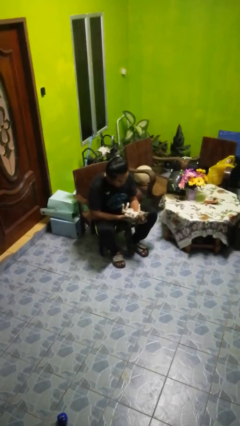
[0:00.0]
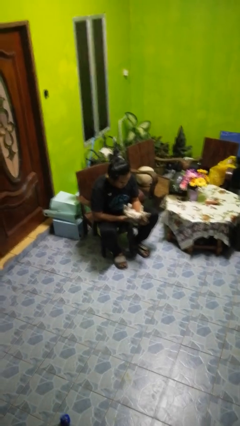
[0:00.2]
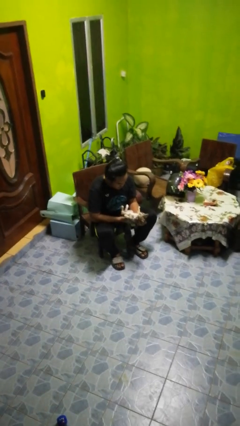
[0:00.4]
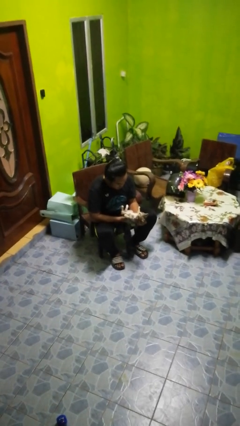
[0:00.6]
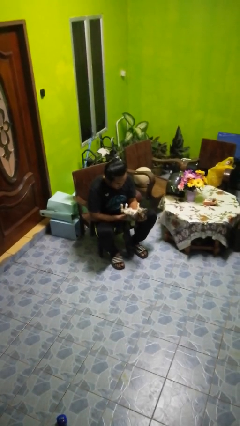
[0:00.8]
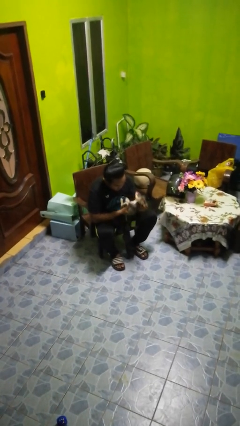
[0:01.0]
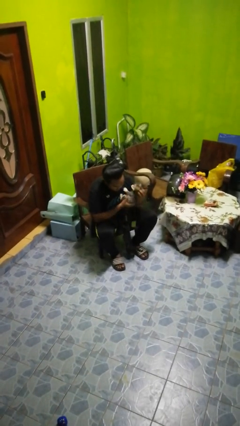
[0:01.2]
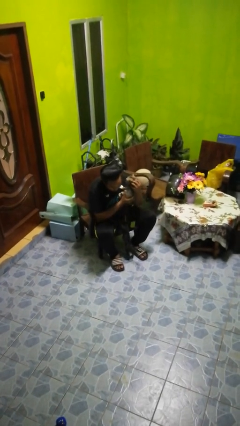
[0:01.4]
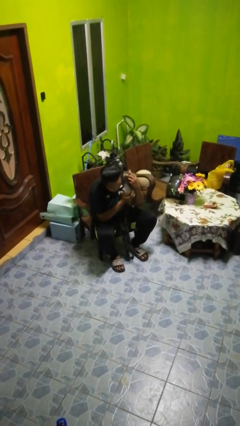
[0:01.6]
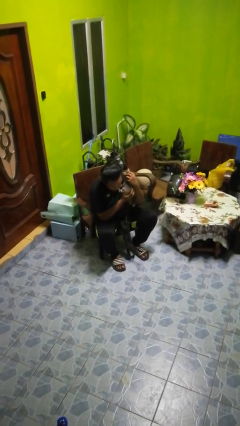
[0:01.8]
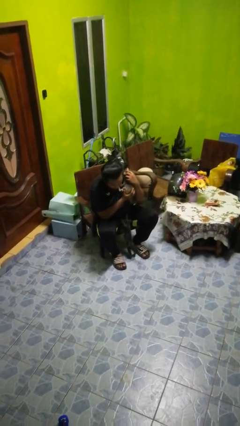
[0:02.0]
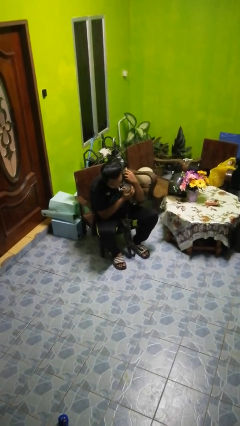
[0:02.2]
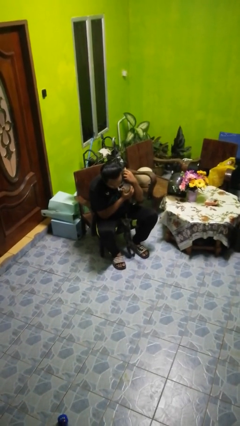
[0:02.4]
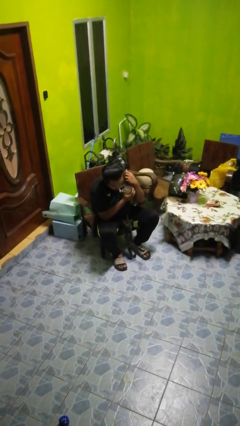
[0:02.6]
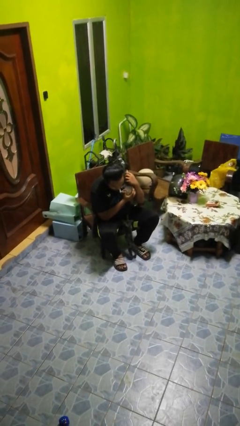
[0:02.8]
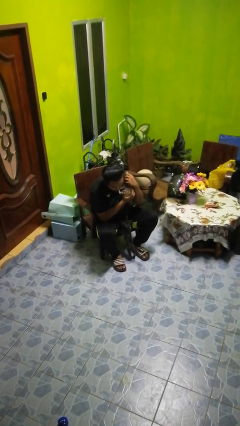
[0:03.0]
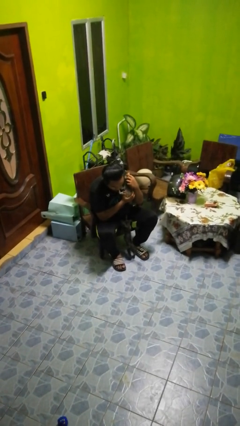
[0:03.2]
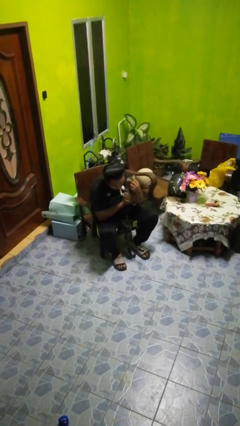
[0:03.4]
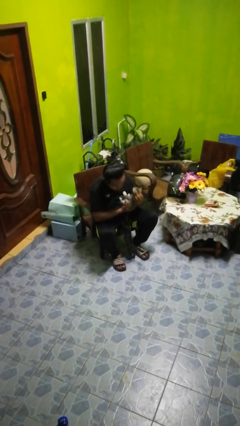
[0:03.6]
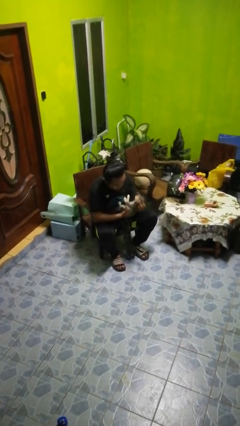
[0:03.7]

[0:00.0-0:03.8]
person hugs cat

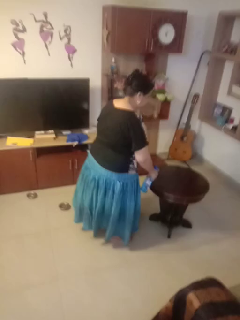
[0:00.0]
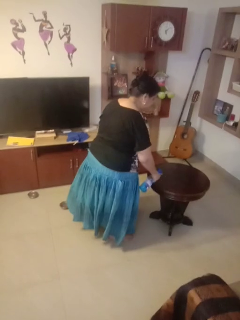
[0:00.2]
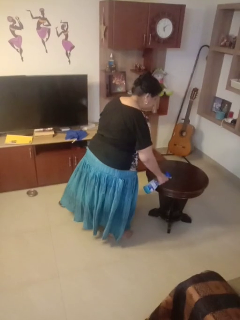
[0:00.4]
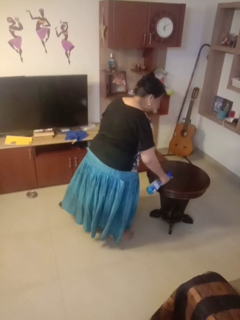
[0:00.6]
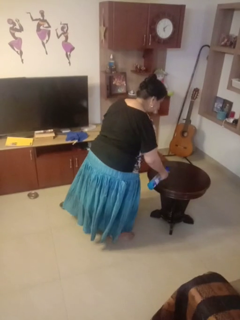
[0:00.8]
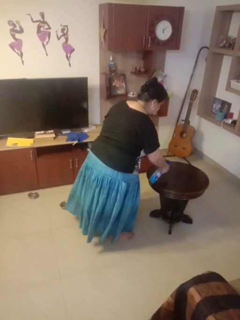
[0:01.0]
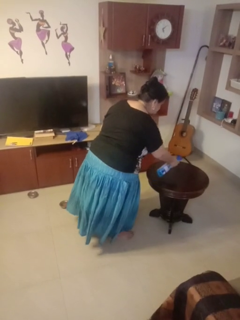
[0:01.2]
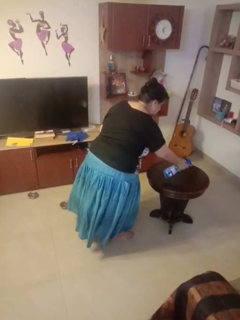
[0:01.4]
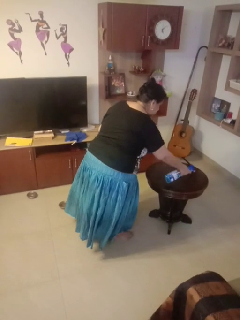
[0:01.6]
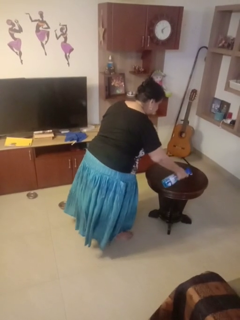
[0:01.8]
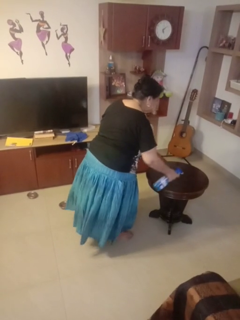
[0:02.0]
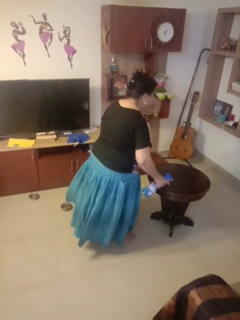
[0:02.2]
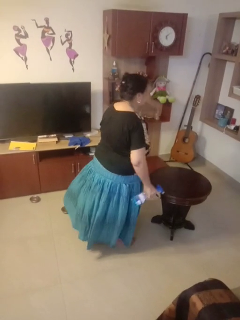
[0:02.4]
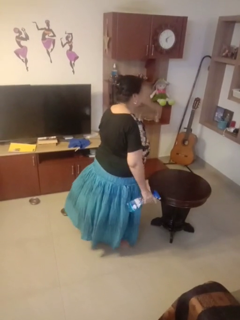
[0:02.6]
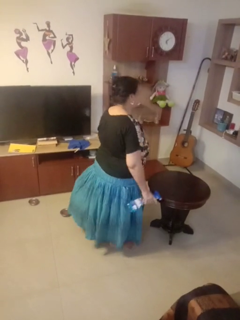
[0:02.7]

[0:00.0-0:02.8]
person sprays from bottle

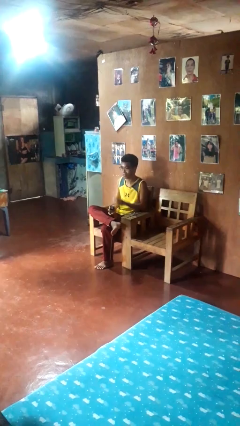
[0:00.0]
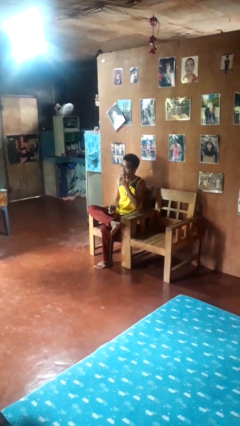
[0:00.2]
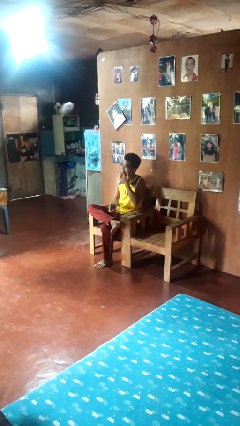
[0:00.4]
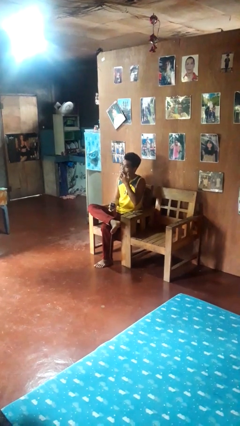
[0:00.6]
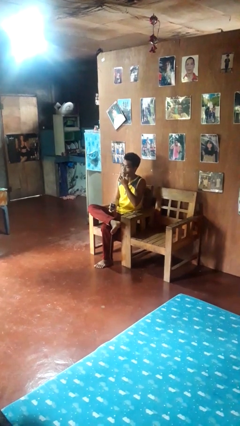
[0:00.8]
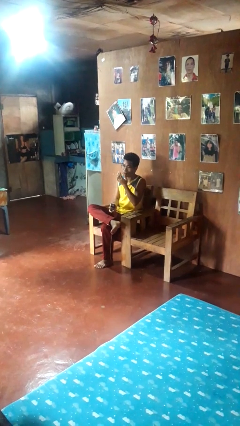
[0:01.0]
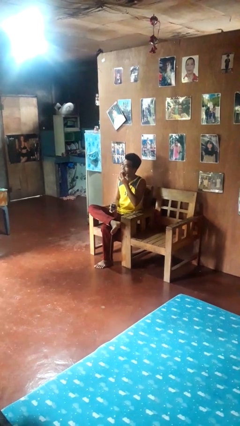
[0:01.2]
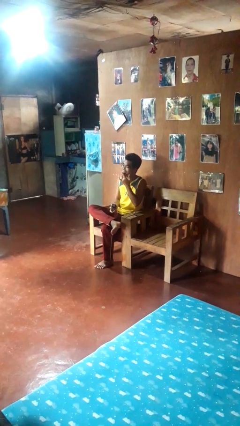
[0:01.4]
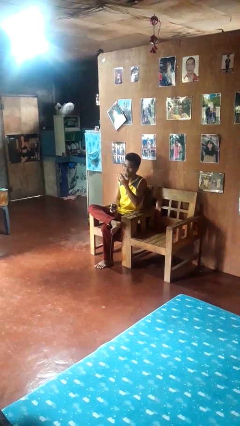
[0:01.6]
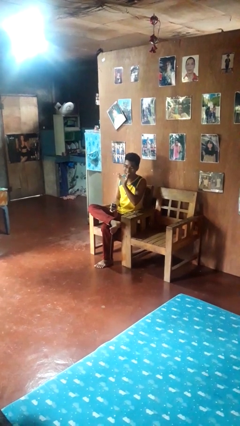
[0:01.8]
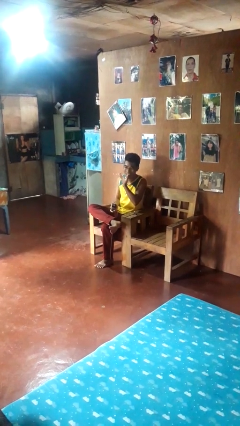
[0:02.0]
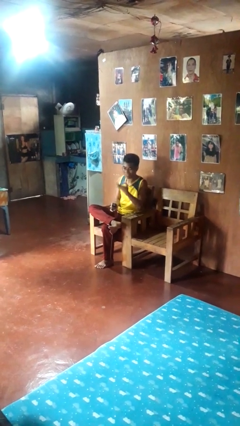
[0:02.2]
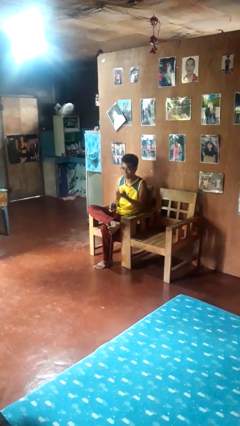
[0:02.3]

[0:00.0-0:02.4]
person licks fingers

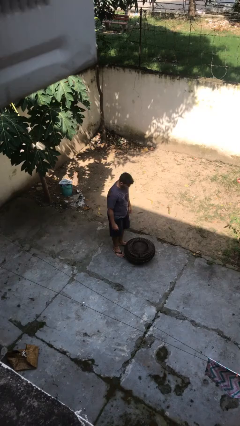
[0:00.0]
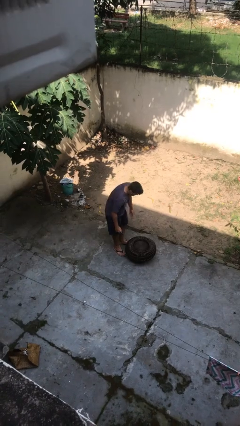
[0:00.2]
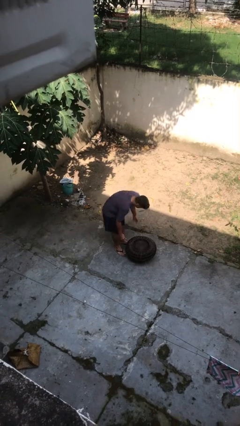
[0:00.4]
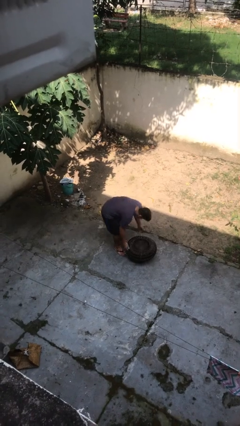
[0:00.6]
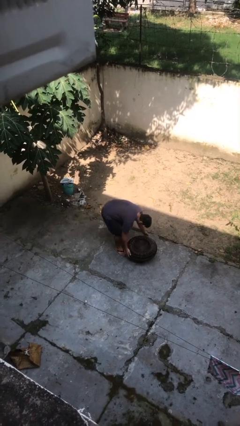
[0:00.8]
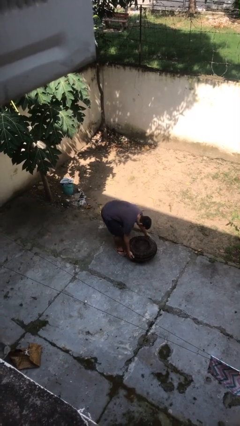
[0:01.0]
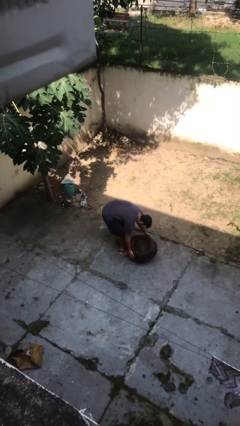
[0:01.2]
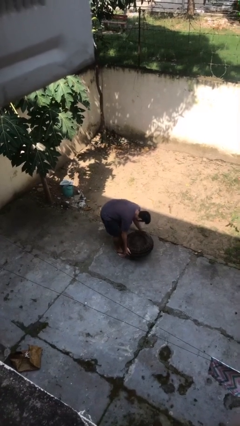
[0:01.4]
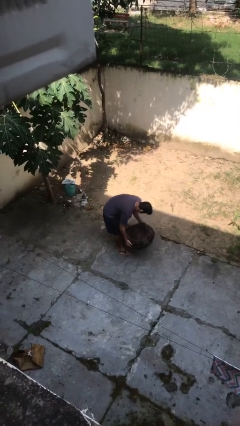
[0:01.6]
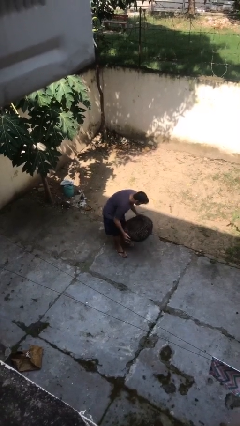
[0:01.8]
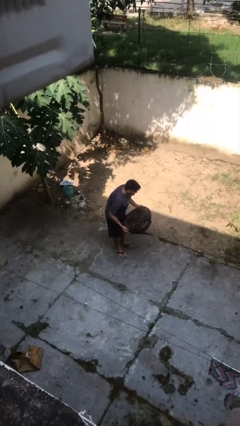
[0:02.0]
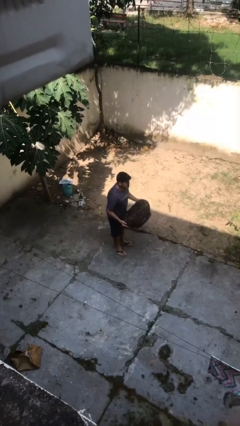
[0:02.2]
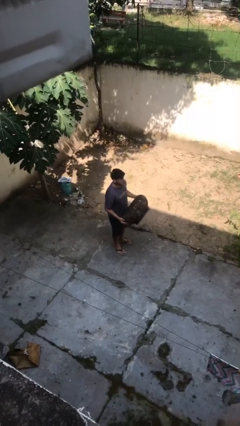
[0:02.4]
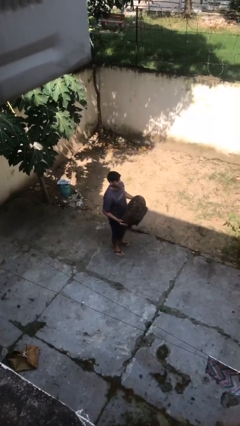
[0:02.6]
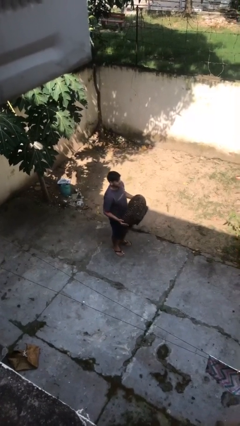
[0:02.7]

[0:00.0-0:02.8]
person picks up object from floor

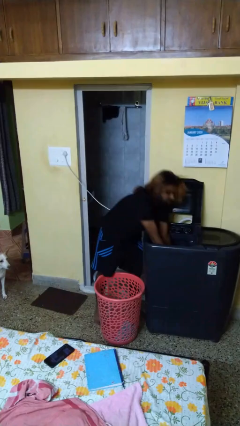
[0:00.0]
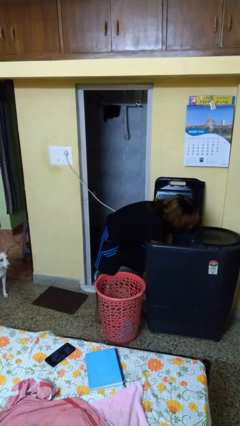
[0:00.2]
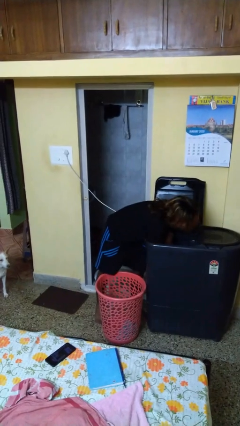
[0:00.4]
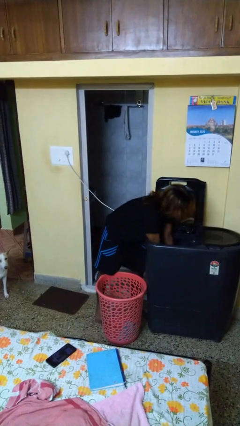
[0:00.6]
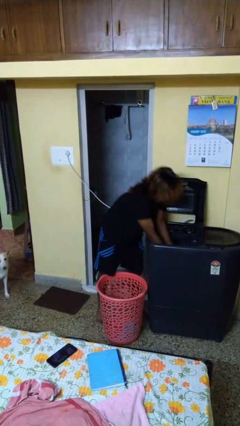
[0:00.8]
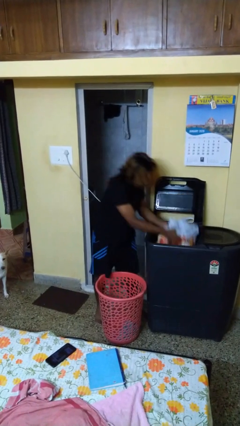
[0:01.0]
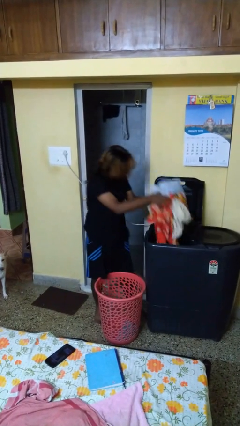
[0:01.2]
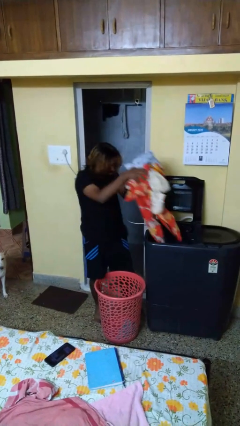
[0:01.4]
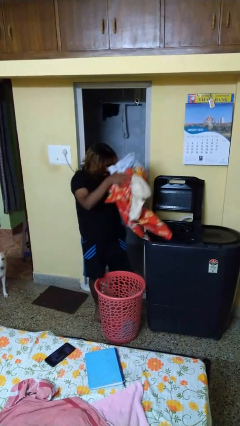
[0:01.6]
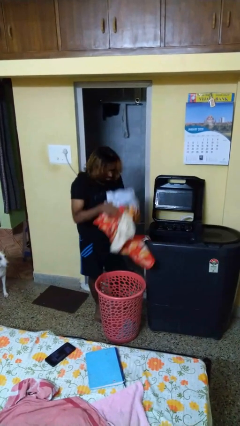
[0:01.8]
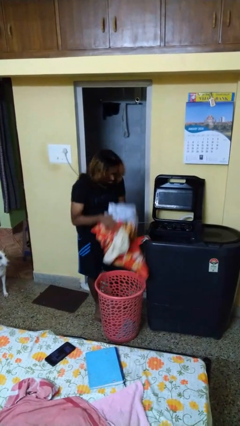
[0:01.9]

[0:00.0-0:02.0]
person unloads clotheswasher

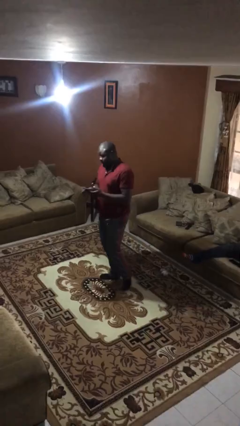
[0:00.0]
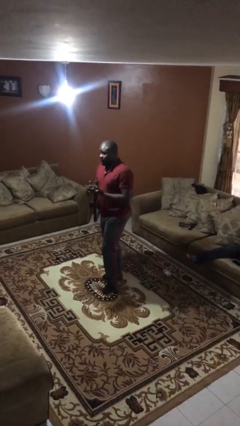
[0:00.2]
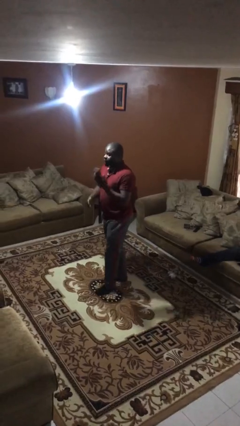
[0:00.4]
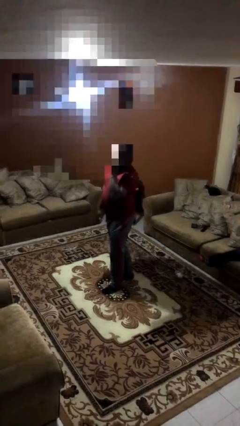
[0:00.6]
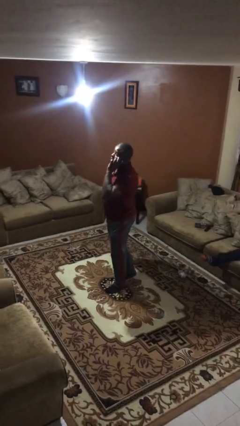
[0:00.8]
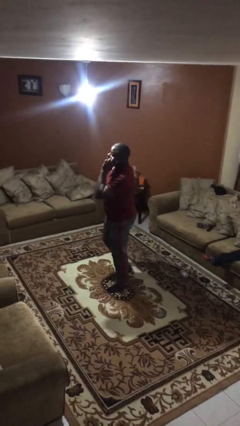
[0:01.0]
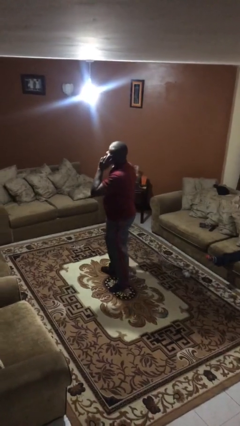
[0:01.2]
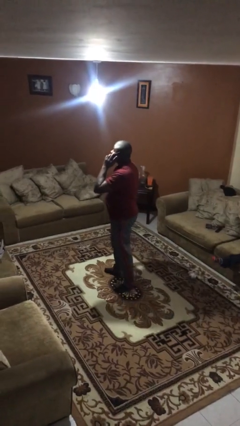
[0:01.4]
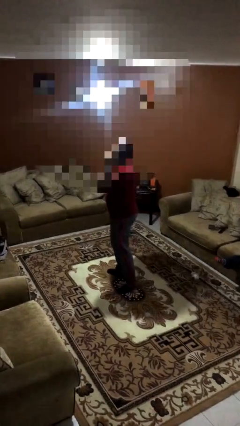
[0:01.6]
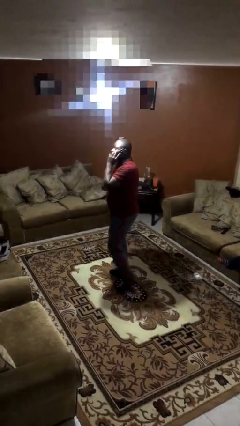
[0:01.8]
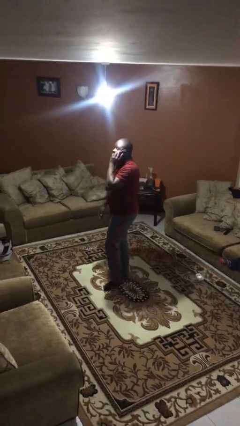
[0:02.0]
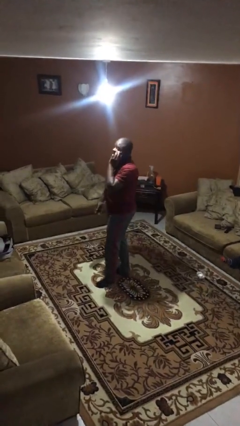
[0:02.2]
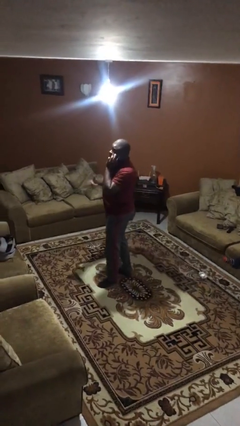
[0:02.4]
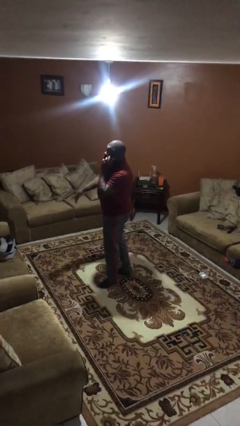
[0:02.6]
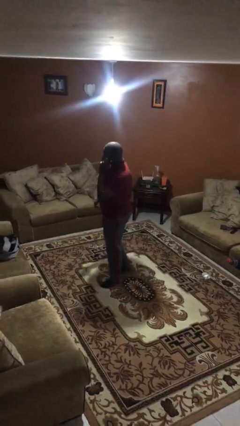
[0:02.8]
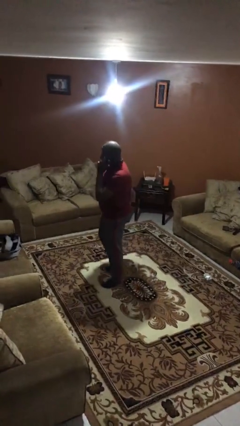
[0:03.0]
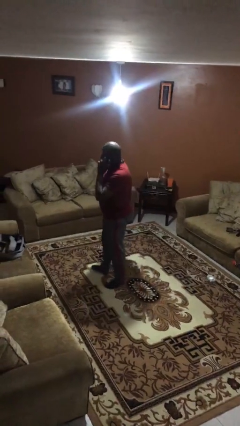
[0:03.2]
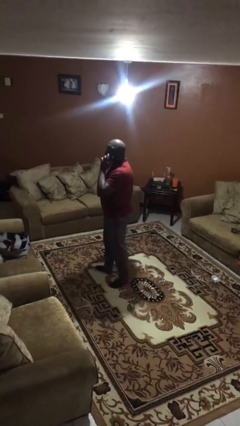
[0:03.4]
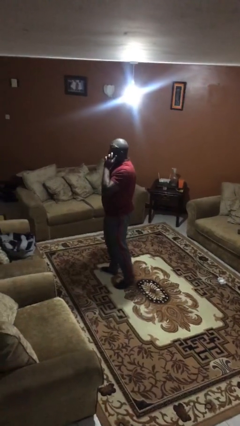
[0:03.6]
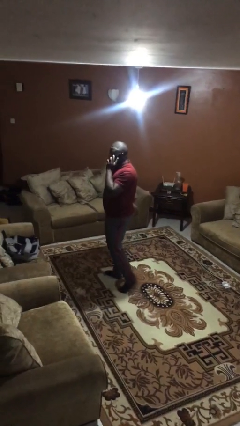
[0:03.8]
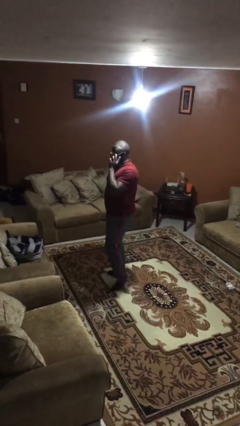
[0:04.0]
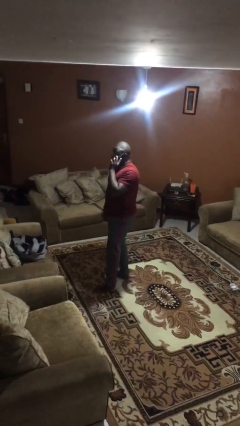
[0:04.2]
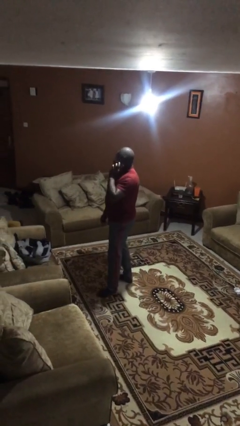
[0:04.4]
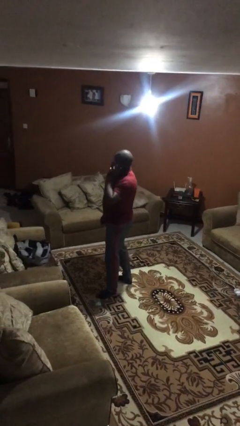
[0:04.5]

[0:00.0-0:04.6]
person talks on phone
